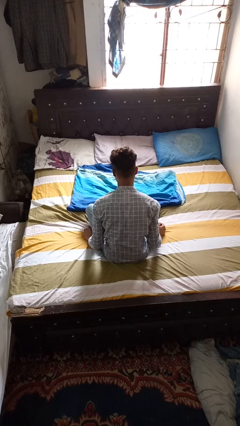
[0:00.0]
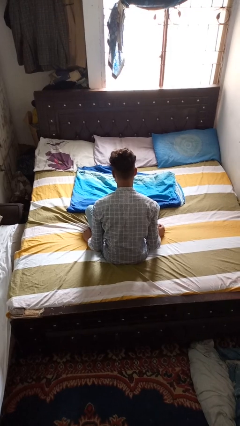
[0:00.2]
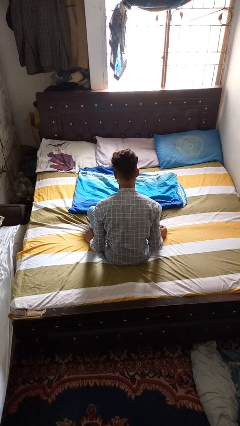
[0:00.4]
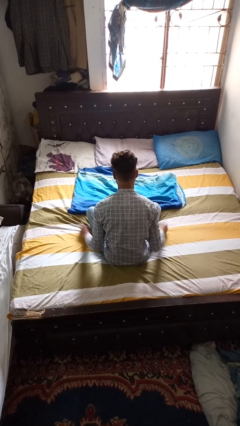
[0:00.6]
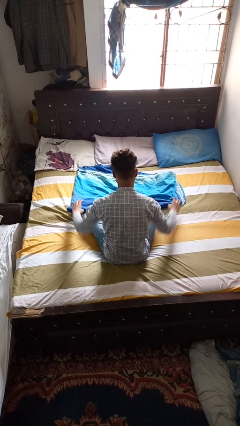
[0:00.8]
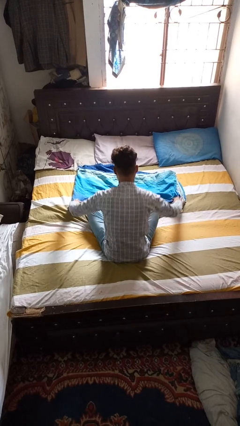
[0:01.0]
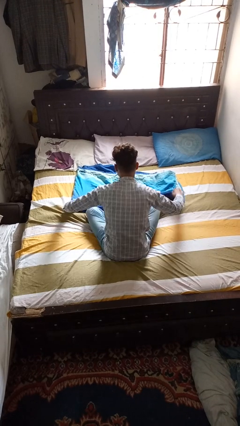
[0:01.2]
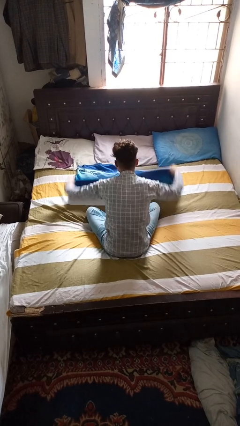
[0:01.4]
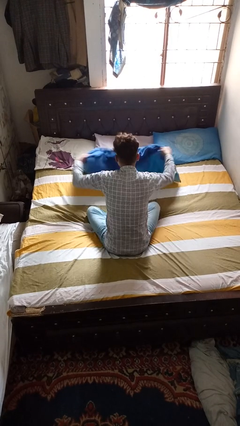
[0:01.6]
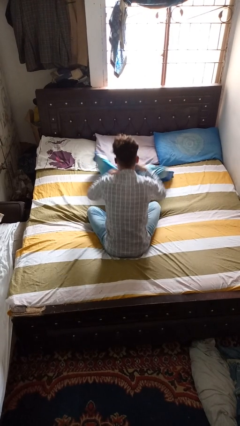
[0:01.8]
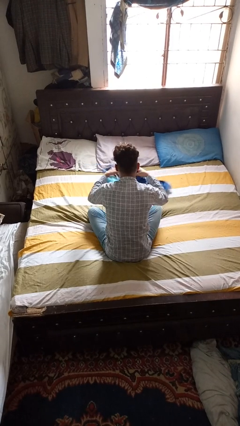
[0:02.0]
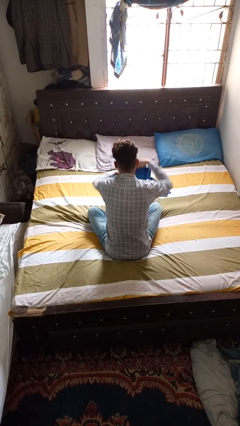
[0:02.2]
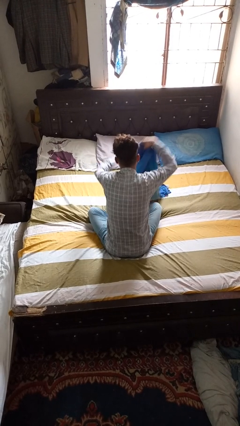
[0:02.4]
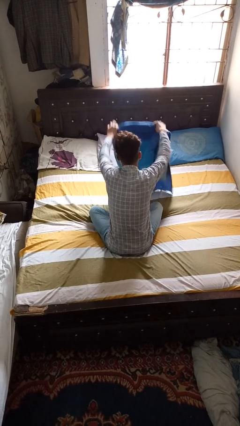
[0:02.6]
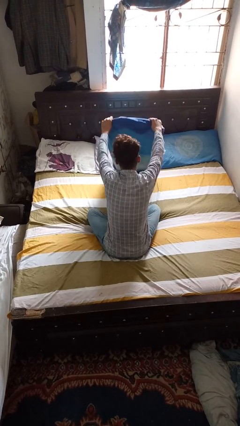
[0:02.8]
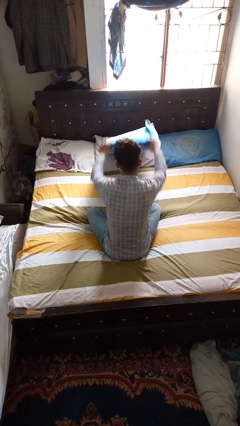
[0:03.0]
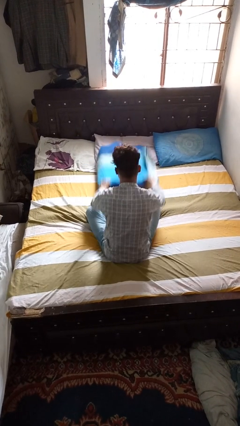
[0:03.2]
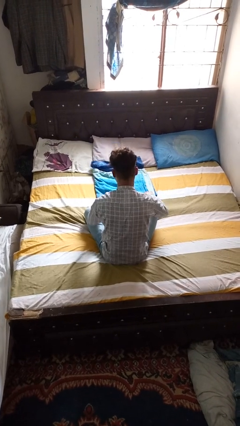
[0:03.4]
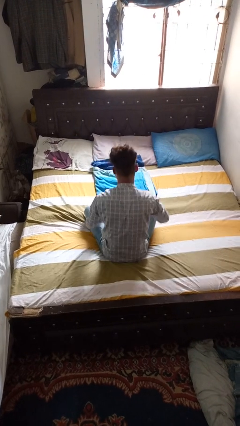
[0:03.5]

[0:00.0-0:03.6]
person folds blanket

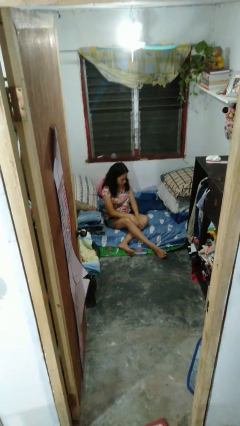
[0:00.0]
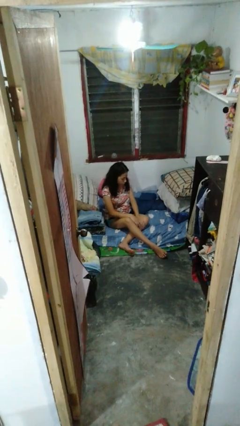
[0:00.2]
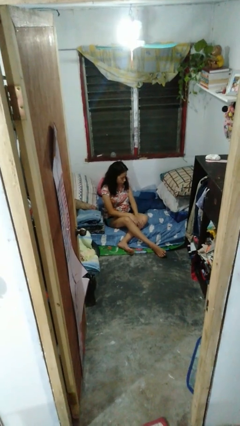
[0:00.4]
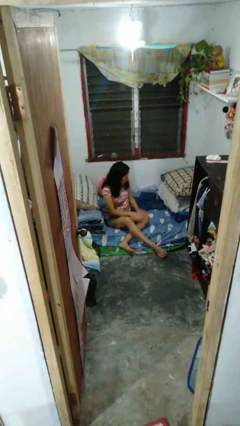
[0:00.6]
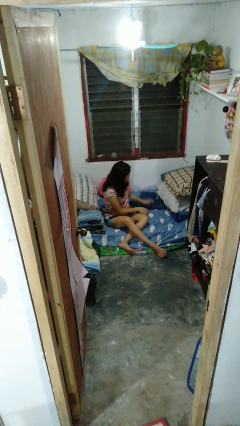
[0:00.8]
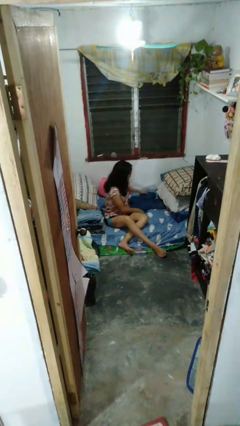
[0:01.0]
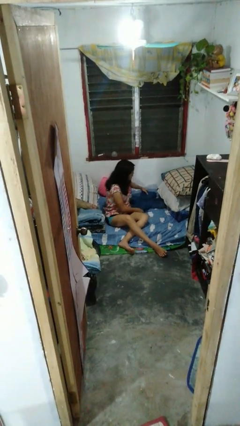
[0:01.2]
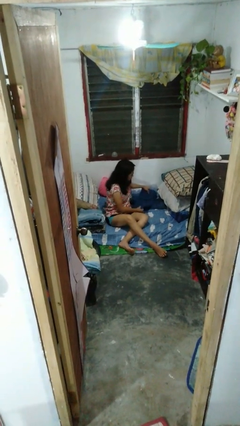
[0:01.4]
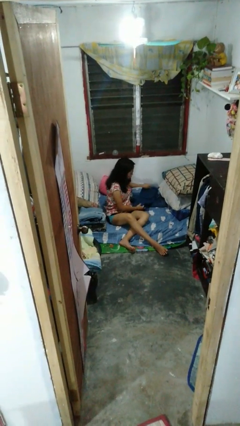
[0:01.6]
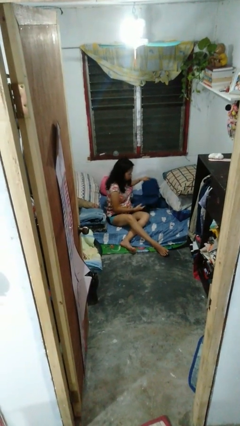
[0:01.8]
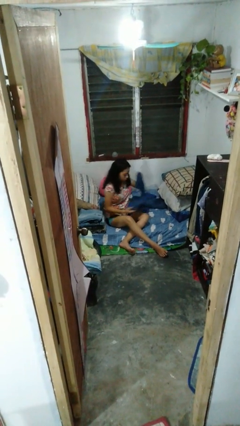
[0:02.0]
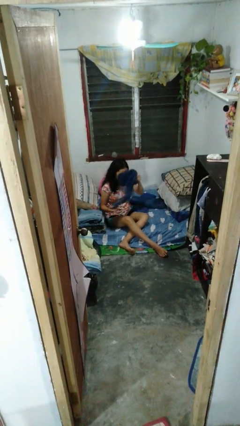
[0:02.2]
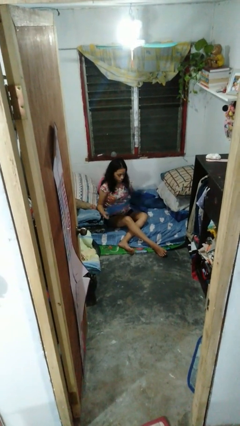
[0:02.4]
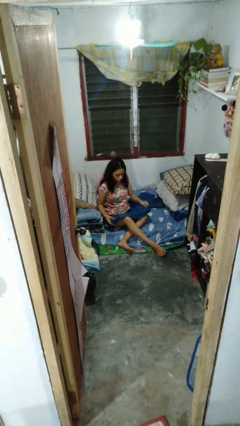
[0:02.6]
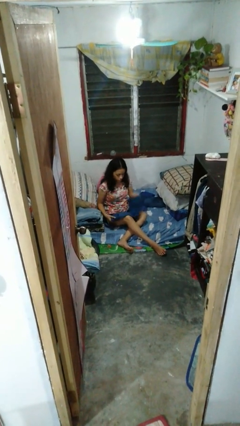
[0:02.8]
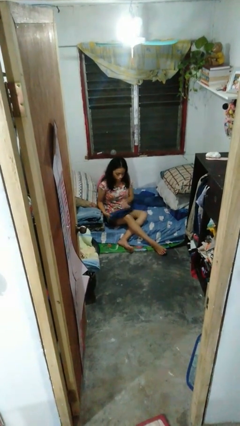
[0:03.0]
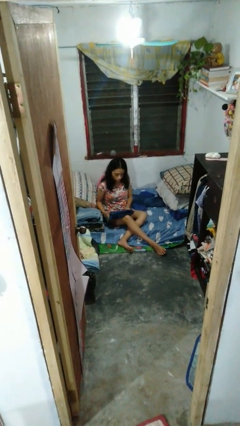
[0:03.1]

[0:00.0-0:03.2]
person folds pants

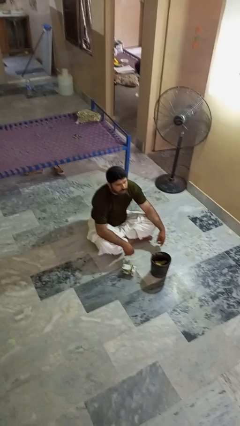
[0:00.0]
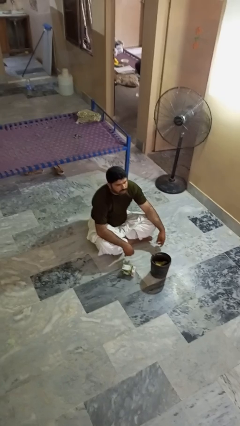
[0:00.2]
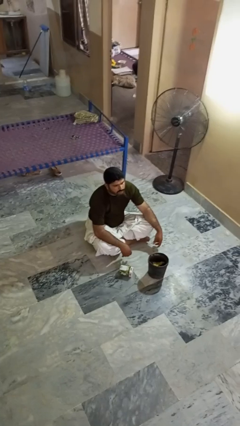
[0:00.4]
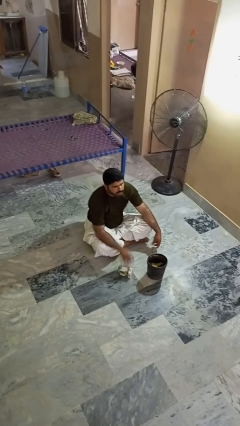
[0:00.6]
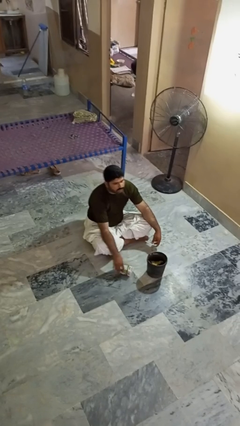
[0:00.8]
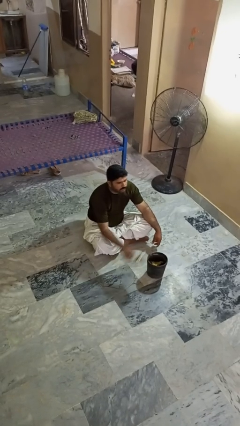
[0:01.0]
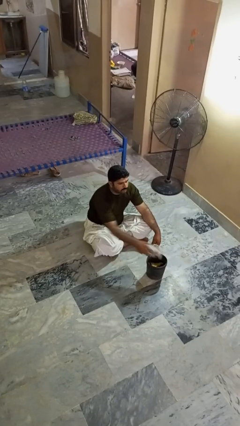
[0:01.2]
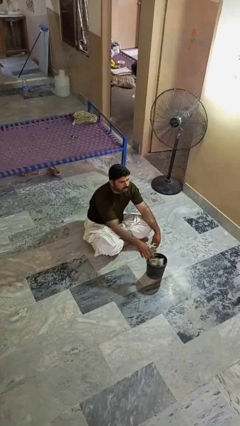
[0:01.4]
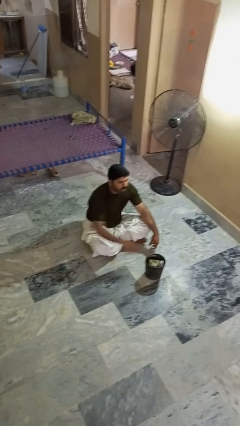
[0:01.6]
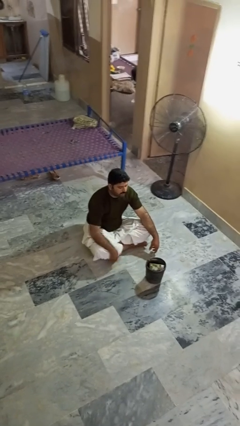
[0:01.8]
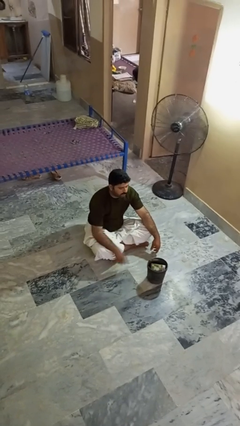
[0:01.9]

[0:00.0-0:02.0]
person puts object into basket

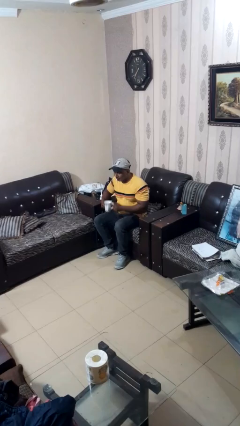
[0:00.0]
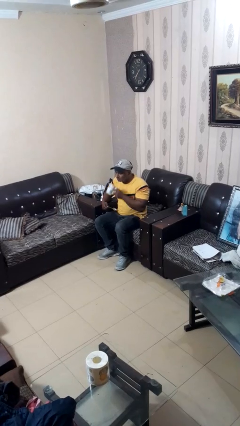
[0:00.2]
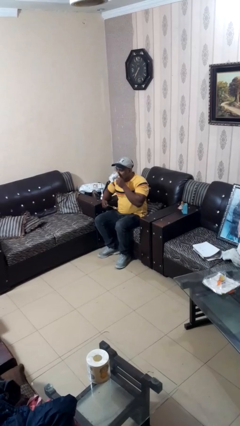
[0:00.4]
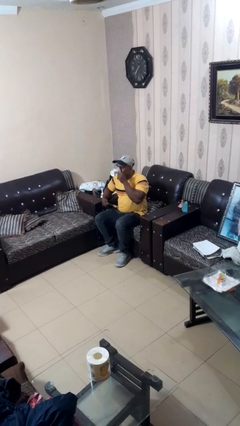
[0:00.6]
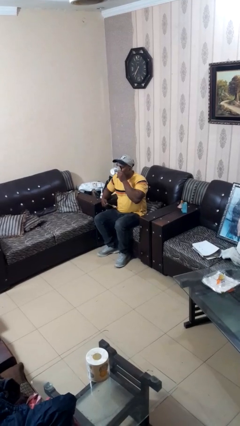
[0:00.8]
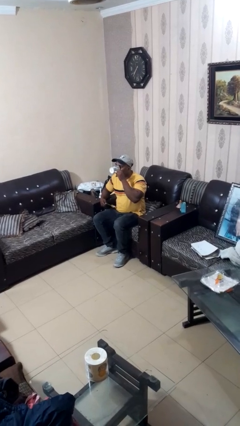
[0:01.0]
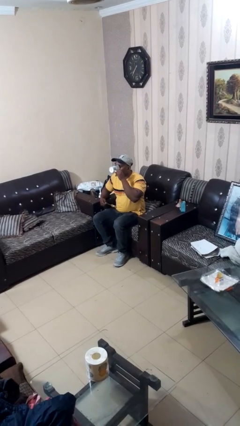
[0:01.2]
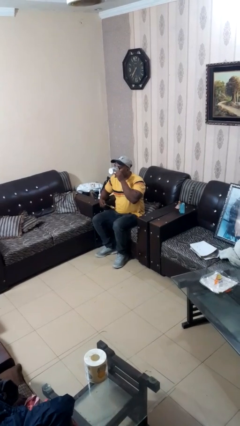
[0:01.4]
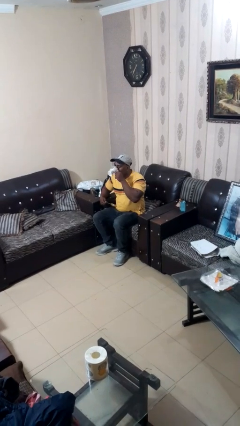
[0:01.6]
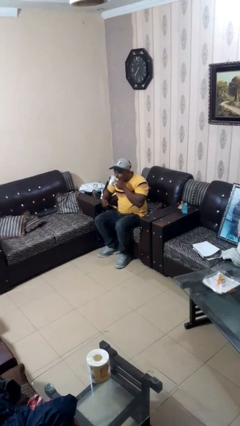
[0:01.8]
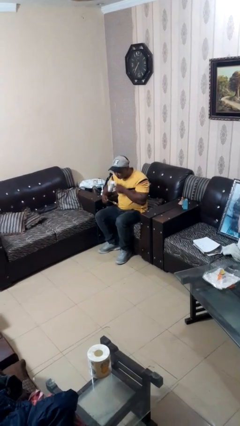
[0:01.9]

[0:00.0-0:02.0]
person drinks from mug

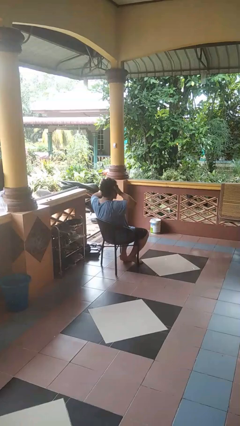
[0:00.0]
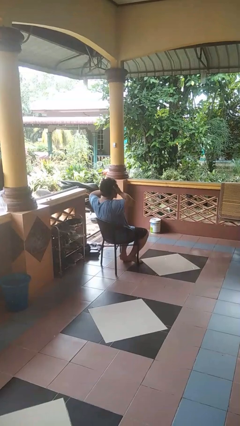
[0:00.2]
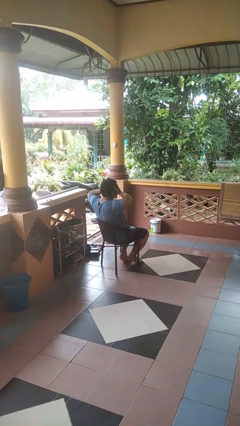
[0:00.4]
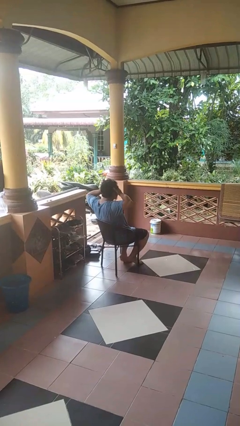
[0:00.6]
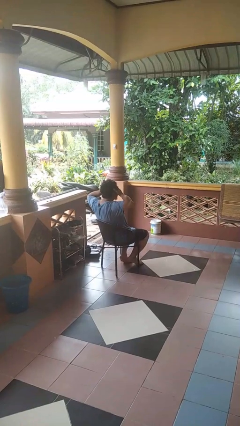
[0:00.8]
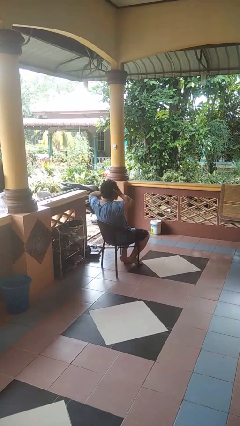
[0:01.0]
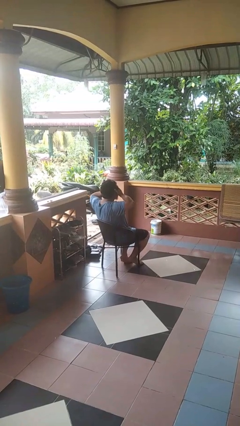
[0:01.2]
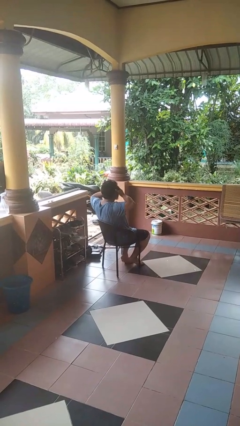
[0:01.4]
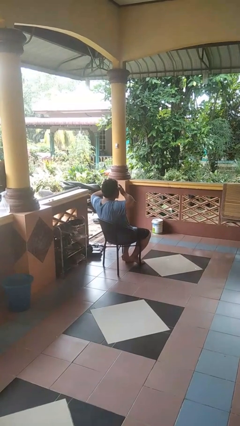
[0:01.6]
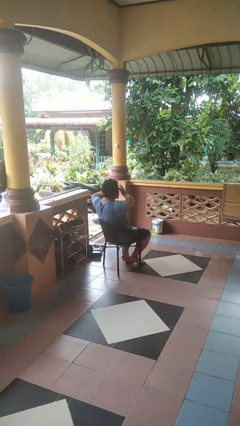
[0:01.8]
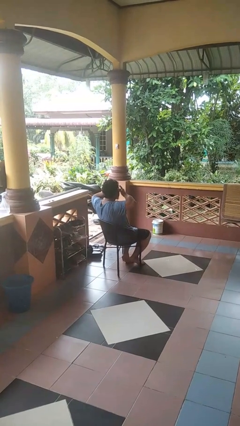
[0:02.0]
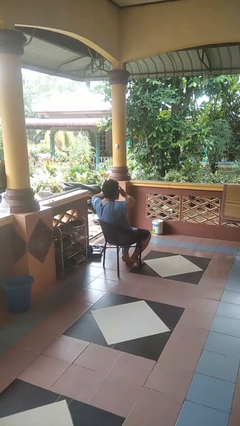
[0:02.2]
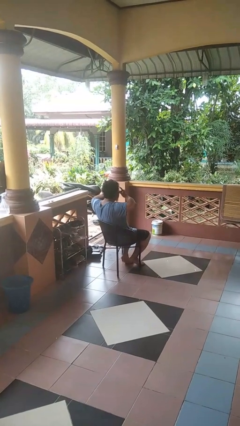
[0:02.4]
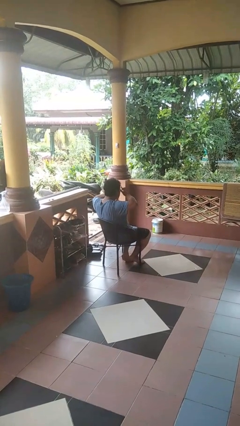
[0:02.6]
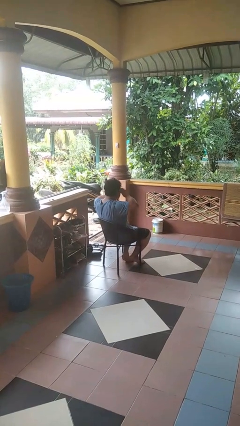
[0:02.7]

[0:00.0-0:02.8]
person rubs eyes

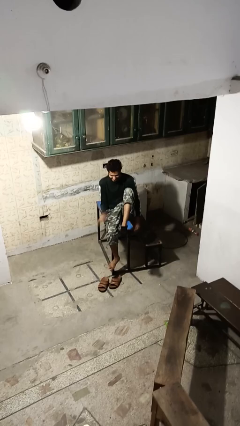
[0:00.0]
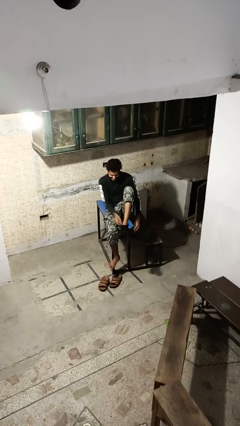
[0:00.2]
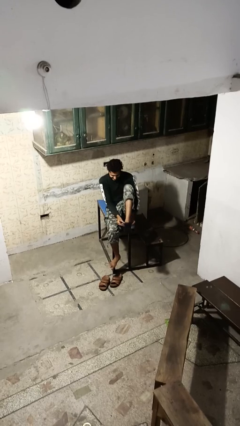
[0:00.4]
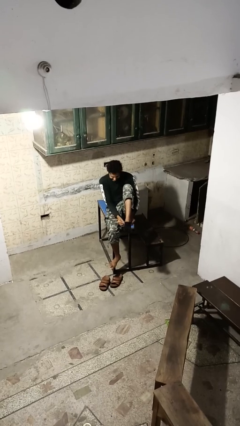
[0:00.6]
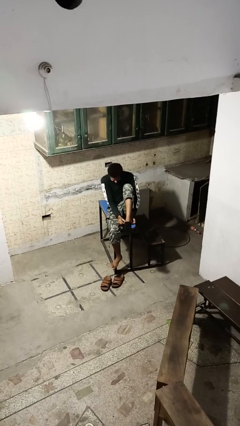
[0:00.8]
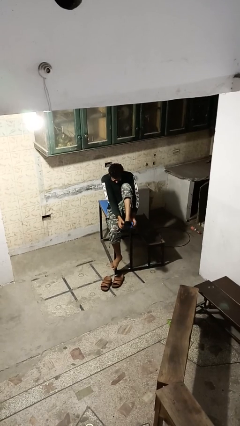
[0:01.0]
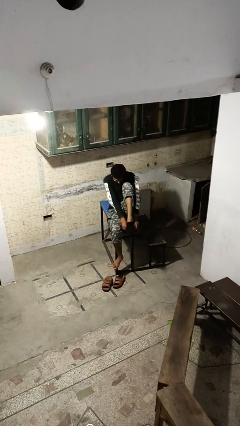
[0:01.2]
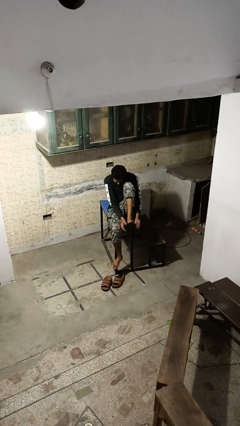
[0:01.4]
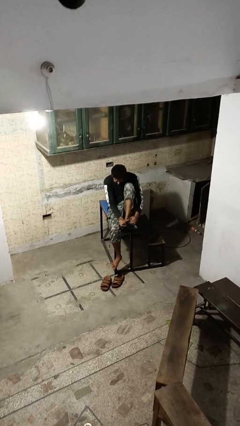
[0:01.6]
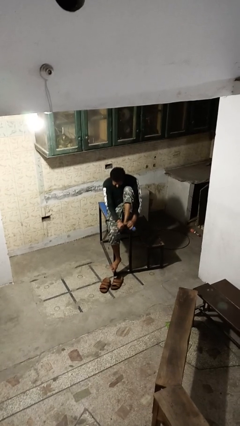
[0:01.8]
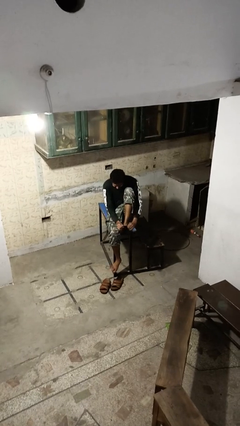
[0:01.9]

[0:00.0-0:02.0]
person takes off socks

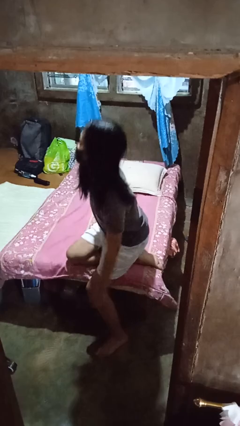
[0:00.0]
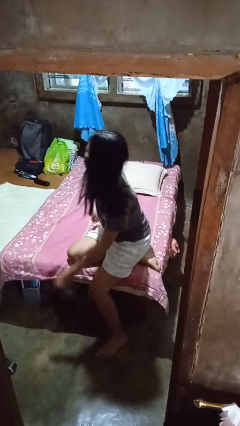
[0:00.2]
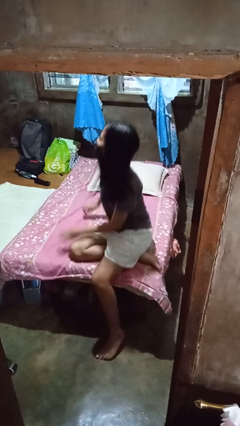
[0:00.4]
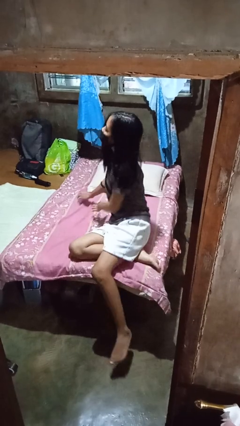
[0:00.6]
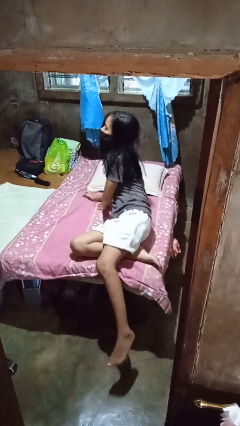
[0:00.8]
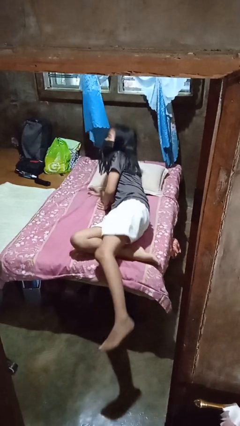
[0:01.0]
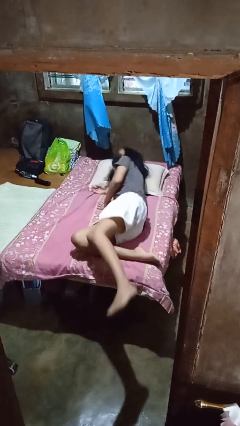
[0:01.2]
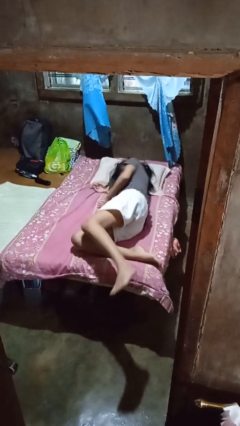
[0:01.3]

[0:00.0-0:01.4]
person lies down on bed

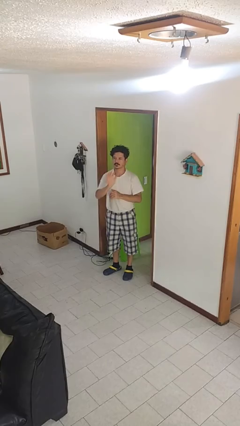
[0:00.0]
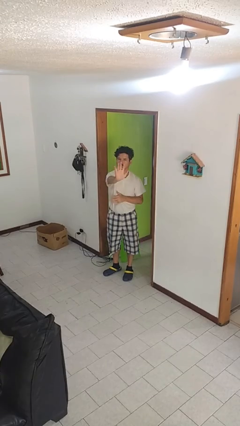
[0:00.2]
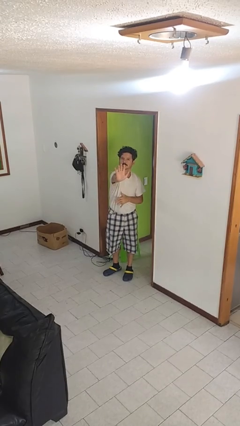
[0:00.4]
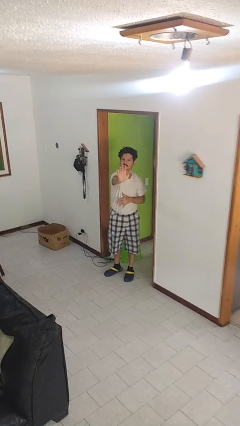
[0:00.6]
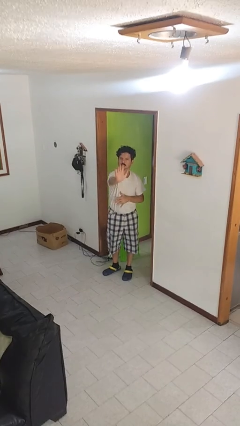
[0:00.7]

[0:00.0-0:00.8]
person gestures stop
